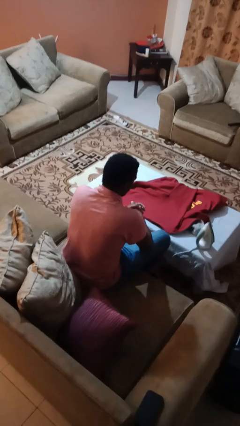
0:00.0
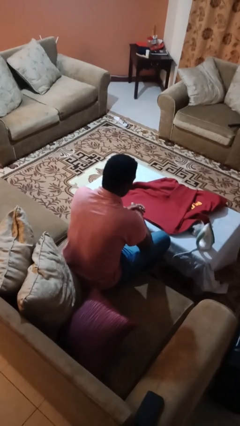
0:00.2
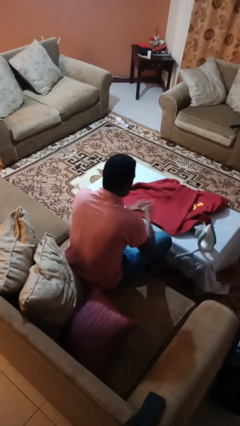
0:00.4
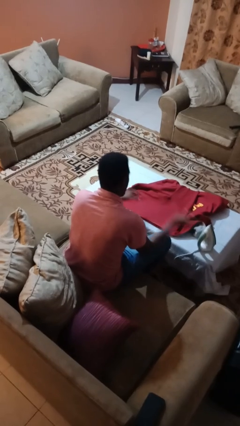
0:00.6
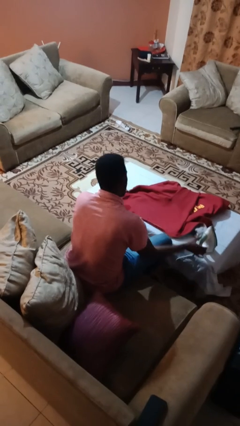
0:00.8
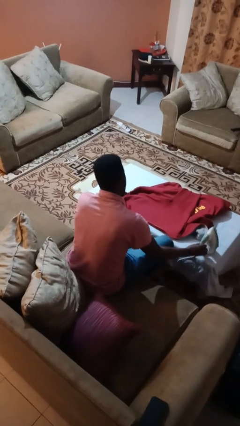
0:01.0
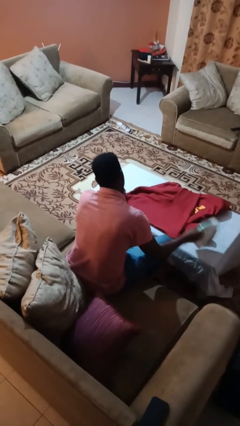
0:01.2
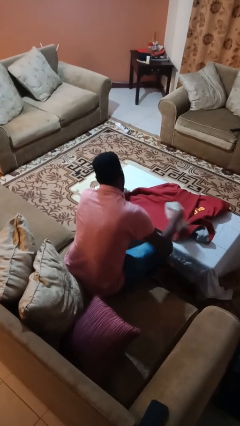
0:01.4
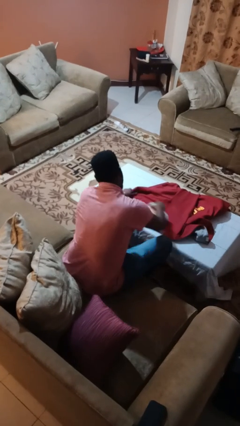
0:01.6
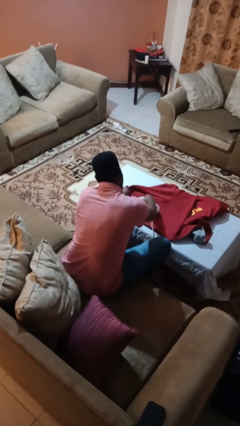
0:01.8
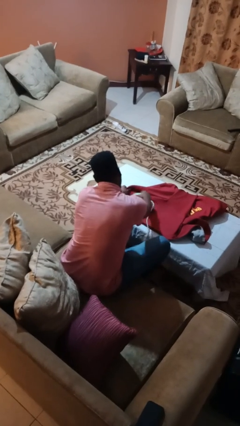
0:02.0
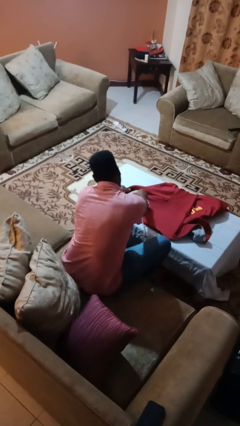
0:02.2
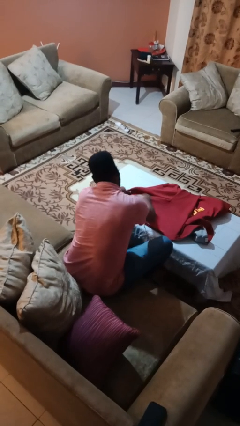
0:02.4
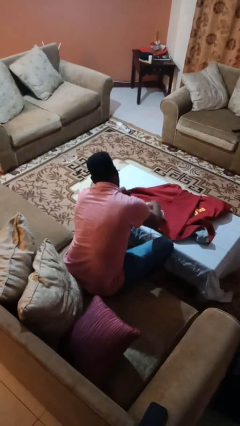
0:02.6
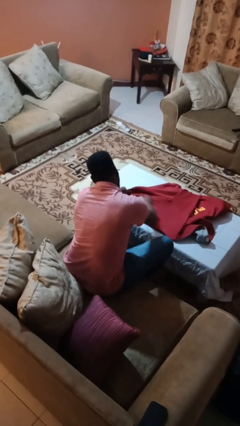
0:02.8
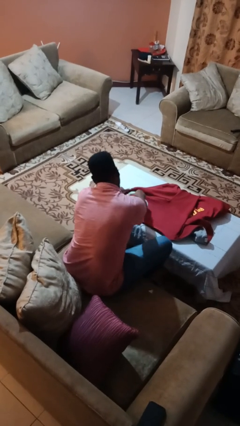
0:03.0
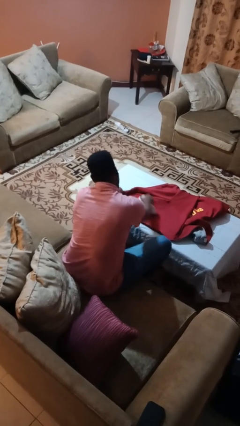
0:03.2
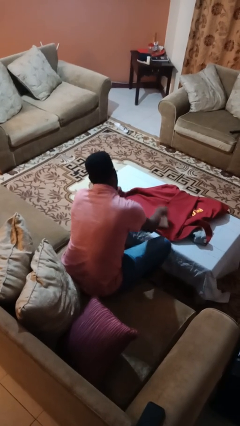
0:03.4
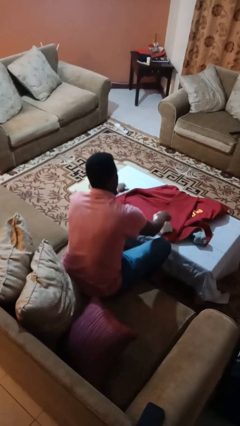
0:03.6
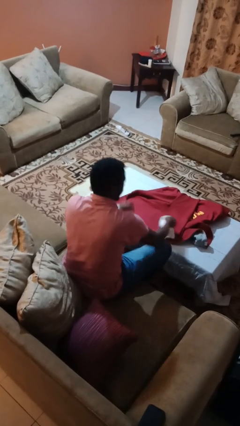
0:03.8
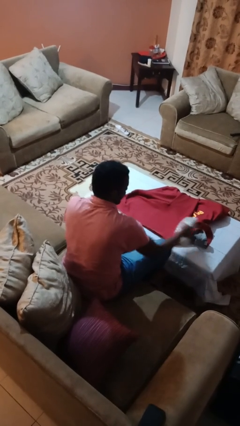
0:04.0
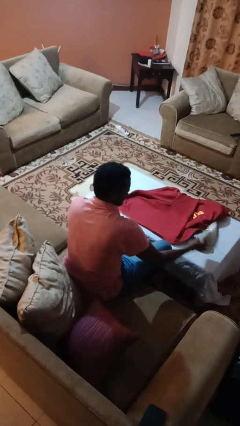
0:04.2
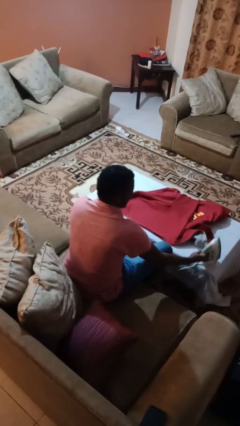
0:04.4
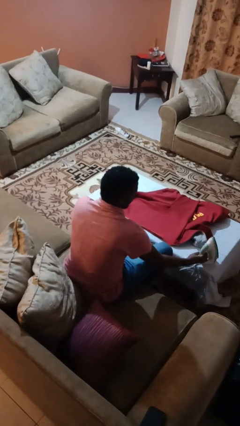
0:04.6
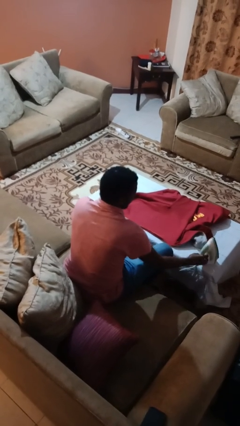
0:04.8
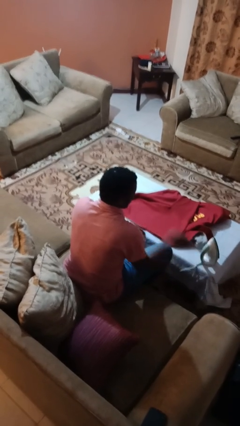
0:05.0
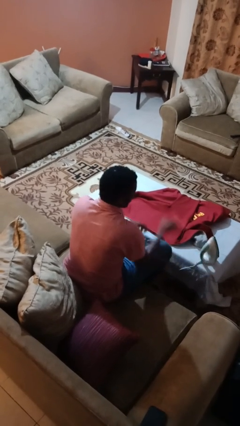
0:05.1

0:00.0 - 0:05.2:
person irons clothes

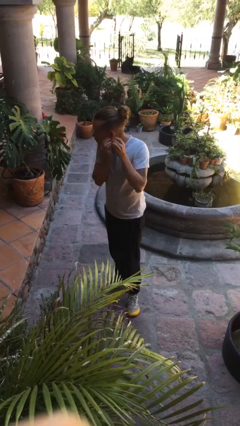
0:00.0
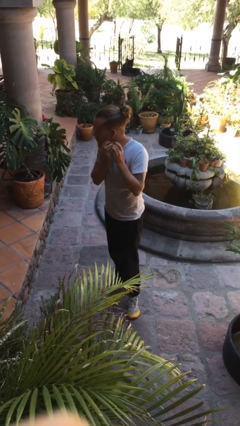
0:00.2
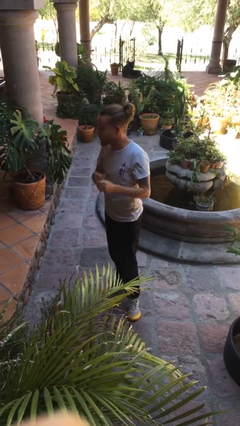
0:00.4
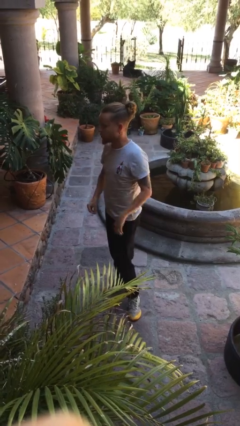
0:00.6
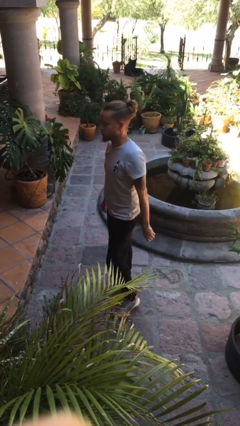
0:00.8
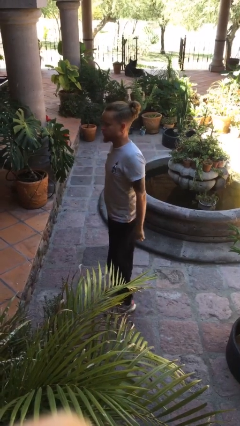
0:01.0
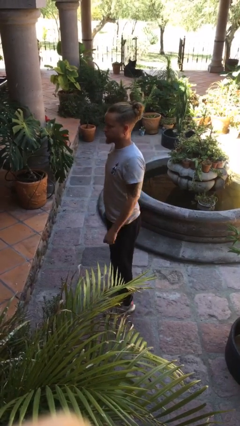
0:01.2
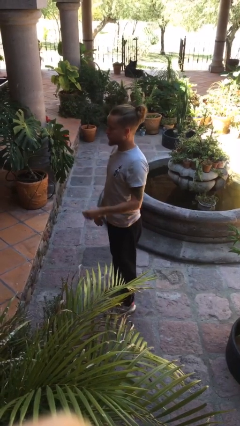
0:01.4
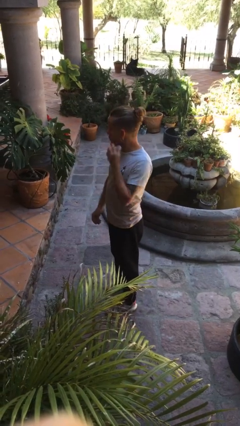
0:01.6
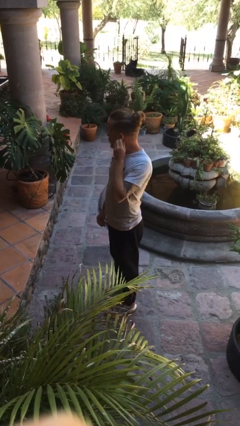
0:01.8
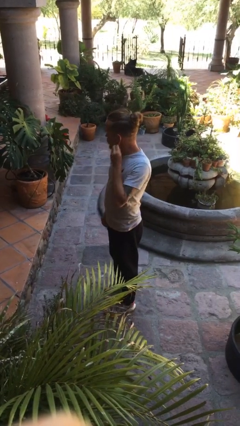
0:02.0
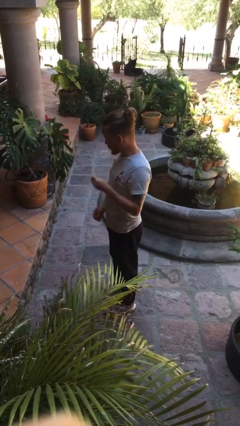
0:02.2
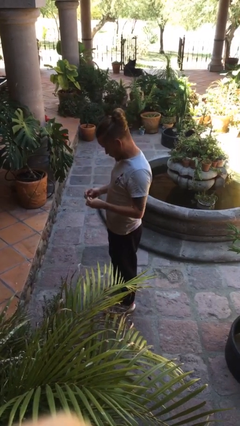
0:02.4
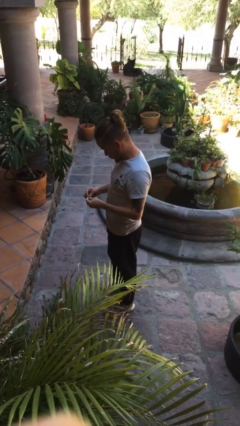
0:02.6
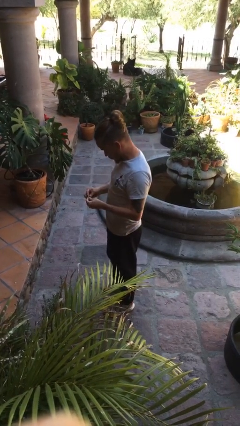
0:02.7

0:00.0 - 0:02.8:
person takes off earrings

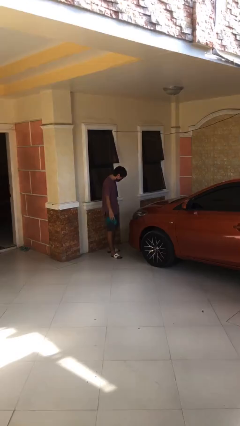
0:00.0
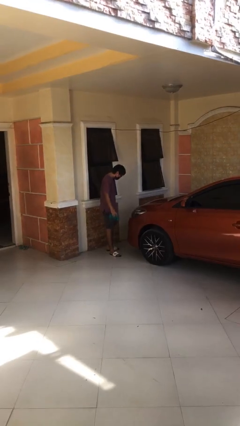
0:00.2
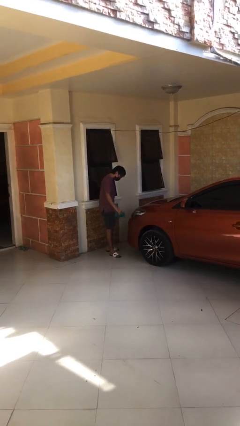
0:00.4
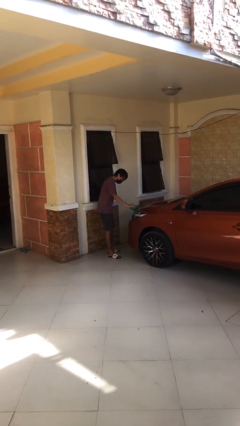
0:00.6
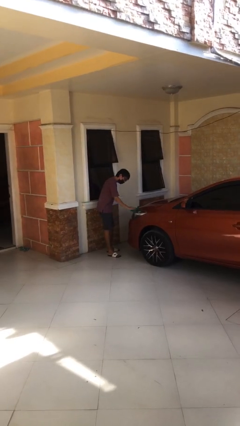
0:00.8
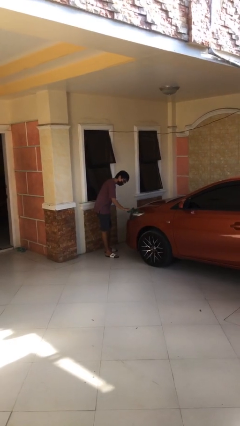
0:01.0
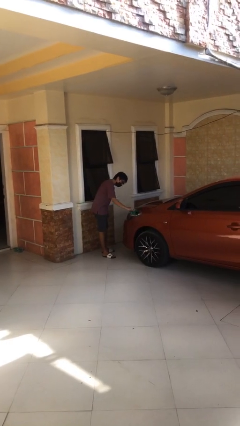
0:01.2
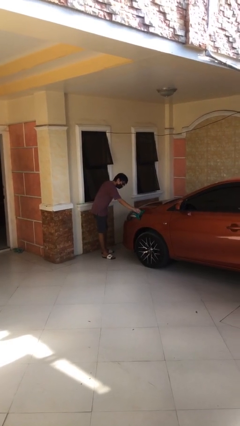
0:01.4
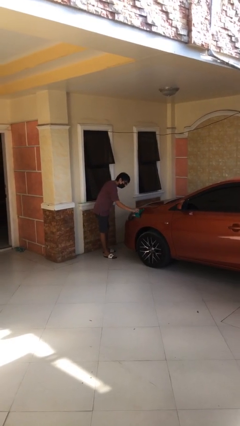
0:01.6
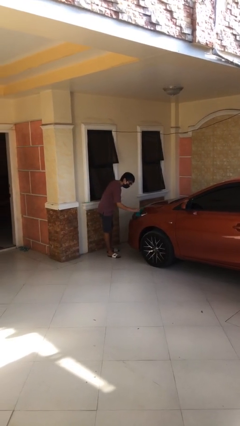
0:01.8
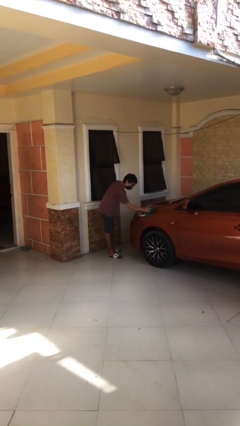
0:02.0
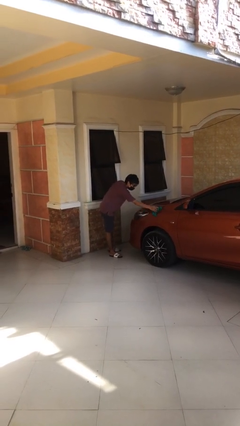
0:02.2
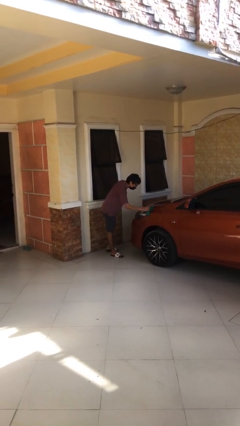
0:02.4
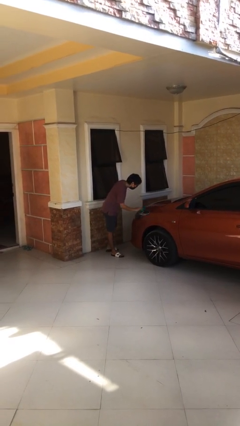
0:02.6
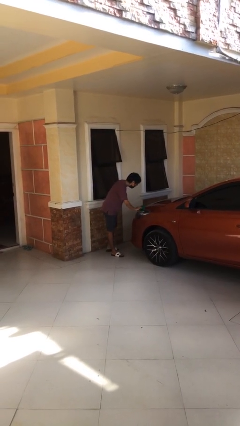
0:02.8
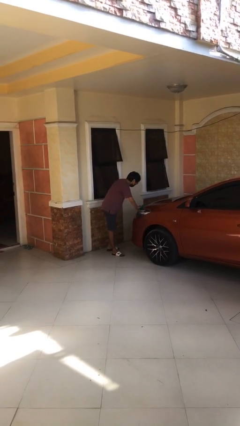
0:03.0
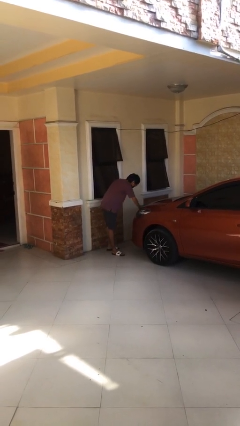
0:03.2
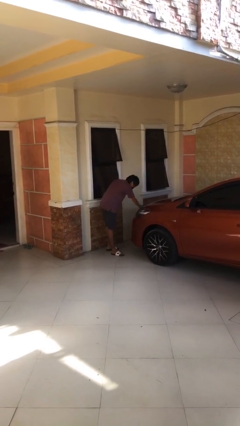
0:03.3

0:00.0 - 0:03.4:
person polishes car with rag

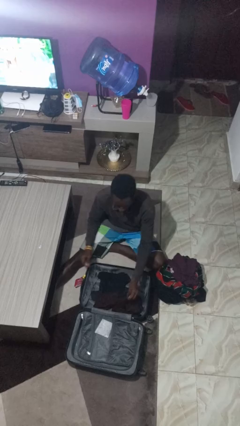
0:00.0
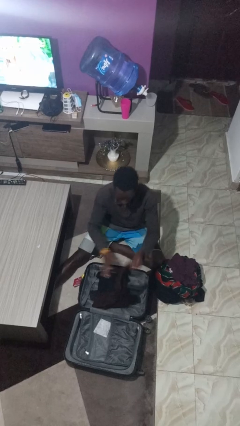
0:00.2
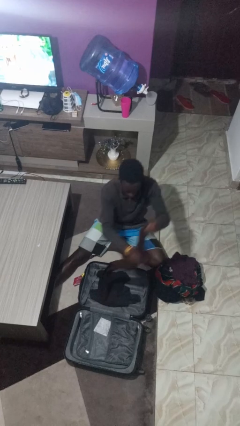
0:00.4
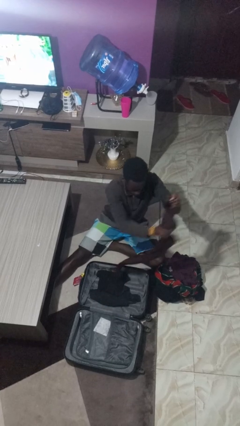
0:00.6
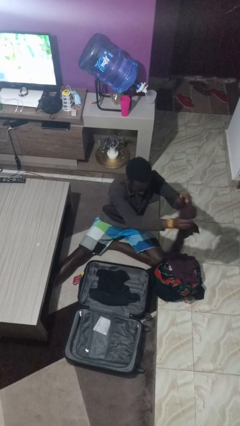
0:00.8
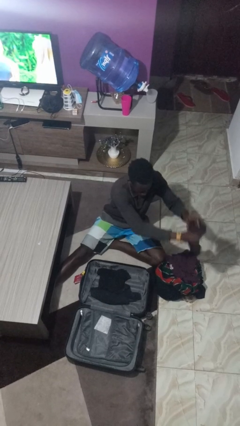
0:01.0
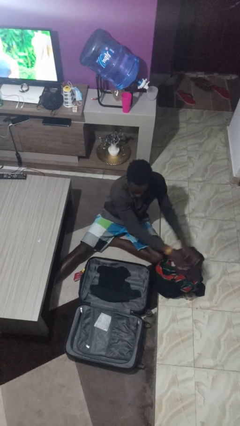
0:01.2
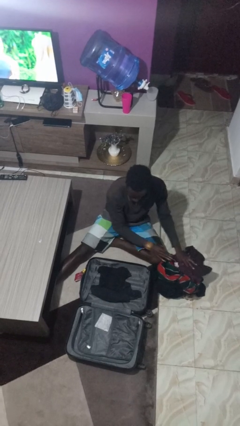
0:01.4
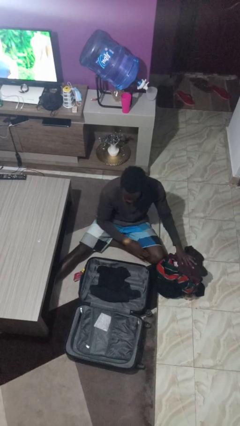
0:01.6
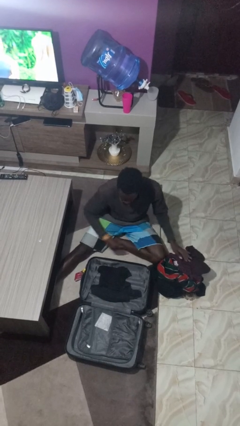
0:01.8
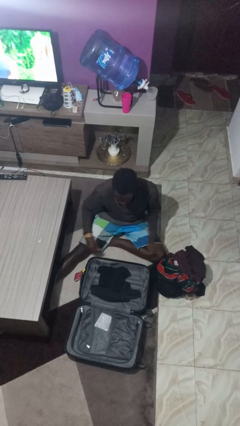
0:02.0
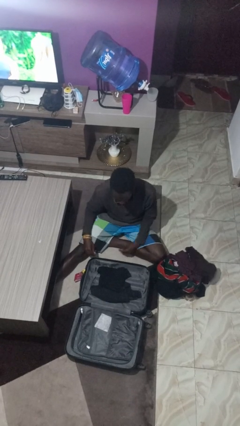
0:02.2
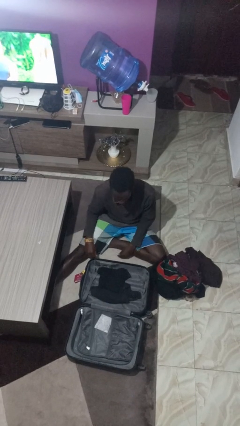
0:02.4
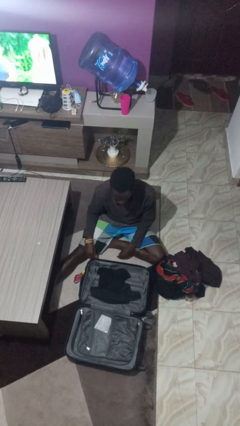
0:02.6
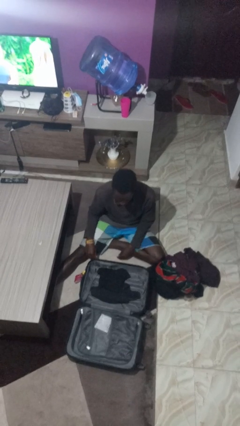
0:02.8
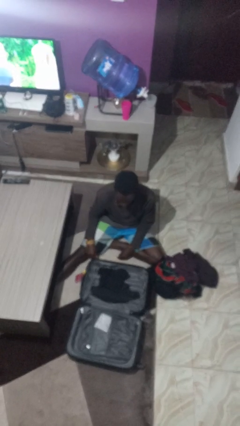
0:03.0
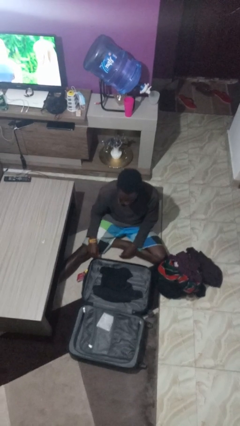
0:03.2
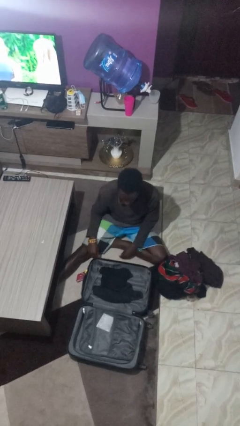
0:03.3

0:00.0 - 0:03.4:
person unloads clothes from suitcase

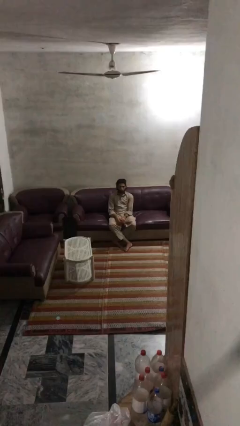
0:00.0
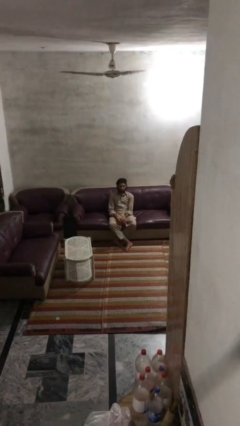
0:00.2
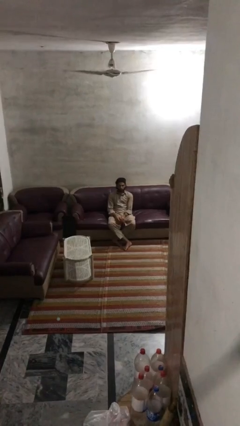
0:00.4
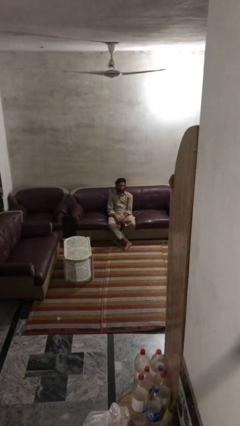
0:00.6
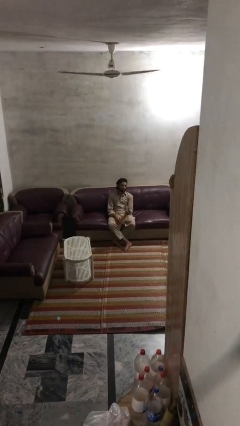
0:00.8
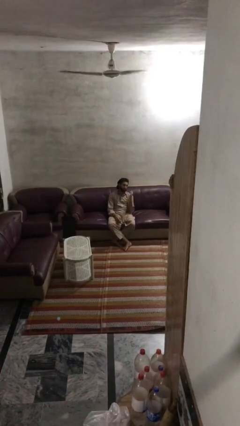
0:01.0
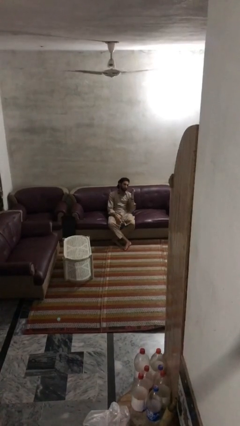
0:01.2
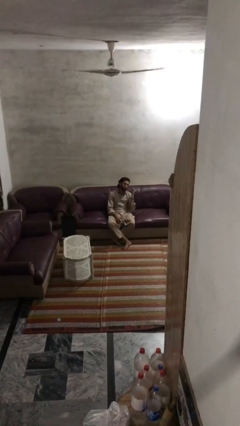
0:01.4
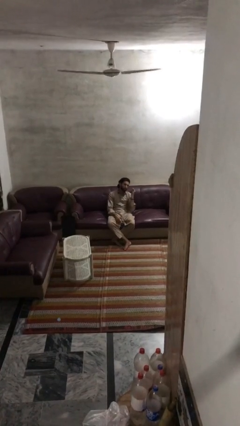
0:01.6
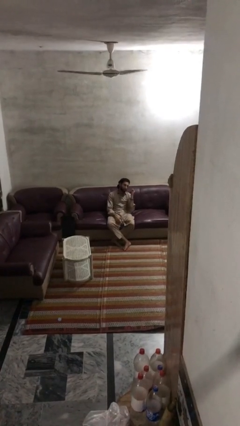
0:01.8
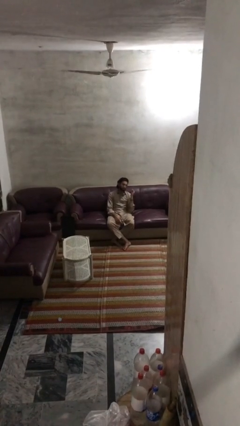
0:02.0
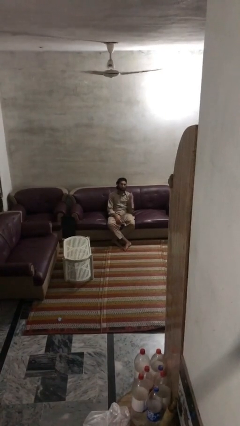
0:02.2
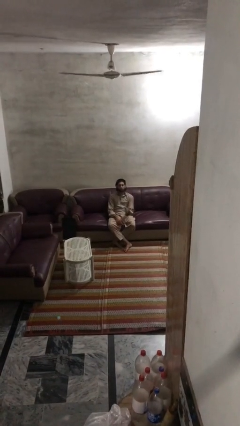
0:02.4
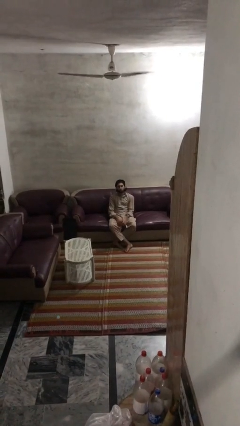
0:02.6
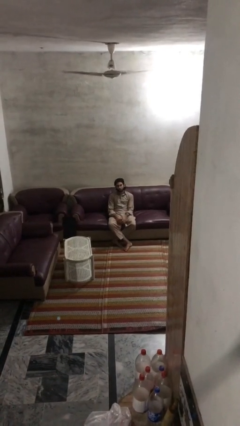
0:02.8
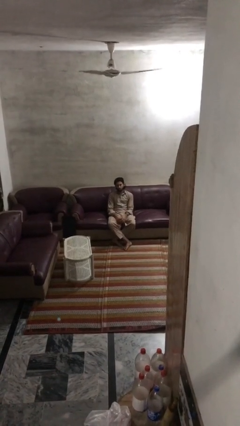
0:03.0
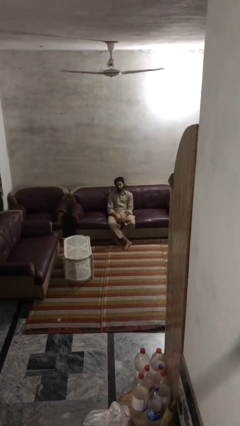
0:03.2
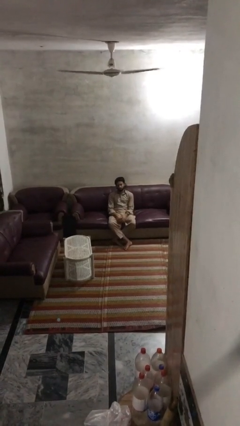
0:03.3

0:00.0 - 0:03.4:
person gestures behind me
